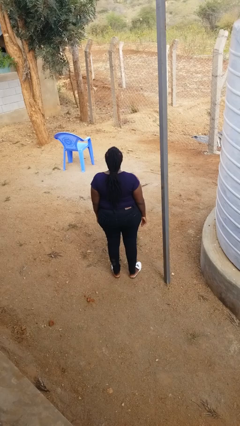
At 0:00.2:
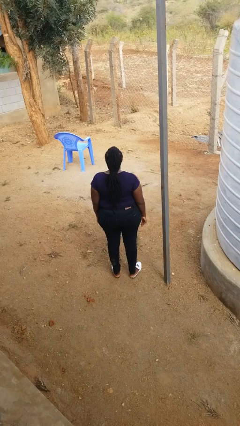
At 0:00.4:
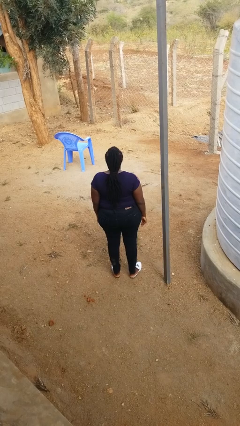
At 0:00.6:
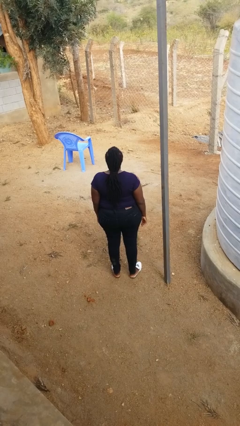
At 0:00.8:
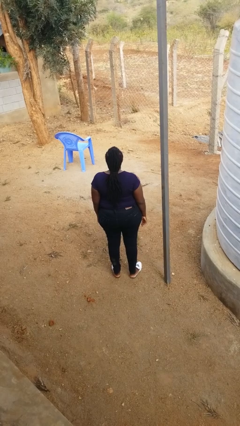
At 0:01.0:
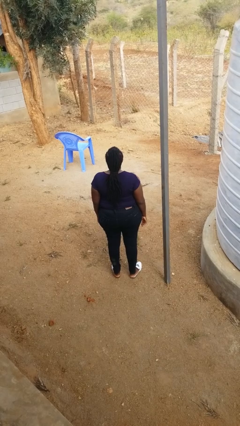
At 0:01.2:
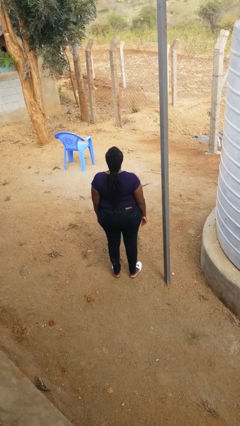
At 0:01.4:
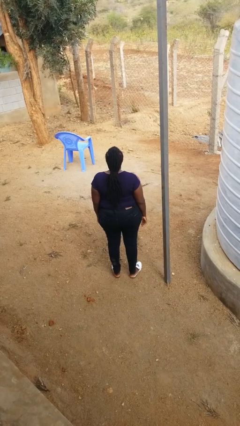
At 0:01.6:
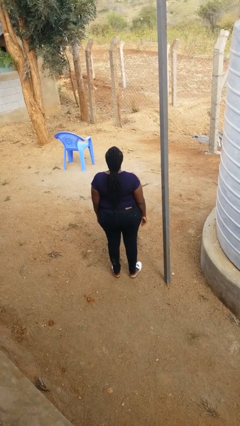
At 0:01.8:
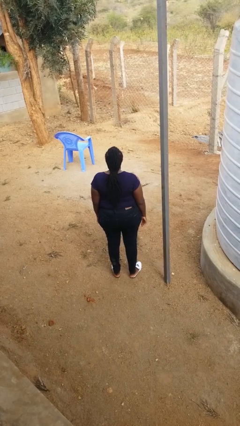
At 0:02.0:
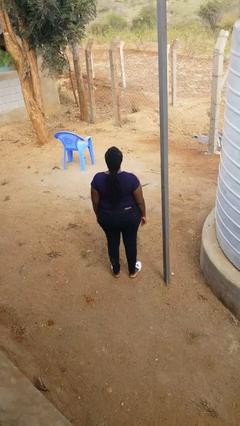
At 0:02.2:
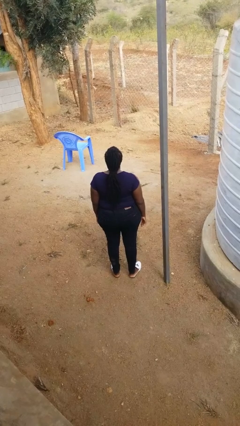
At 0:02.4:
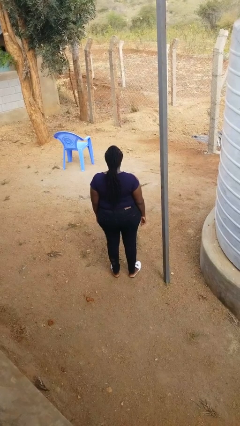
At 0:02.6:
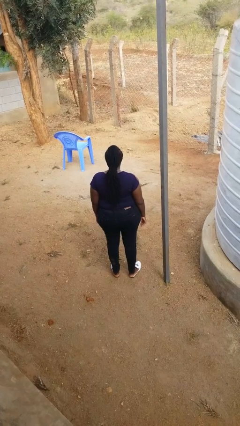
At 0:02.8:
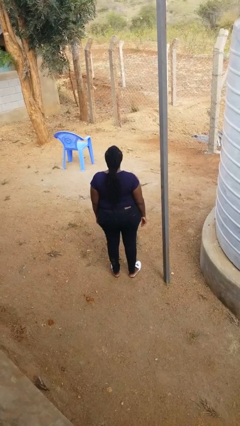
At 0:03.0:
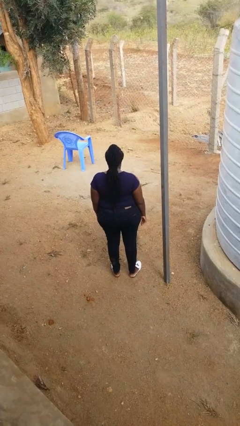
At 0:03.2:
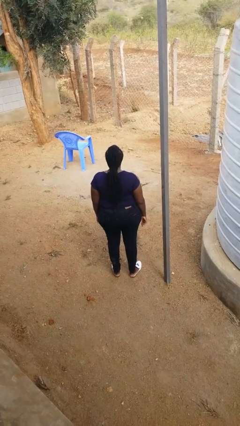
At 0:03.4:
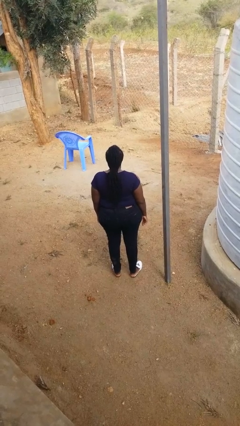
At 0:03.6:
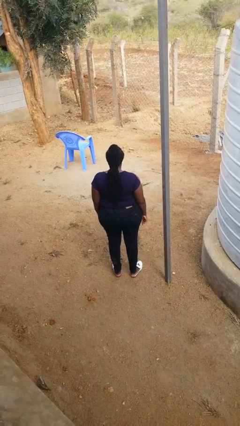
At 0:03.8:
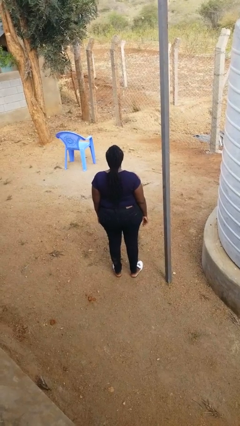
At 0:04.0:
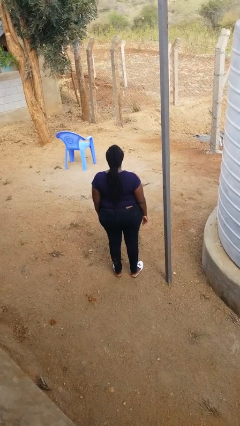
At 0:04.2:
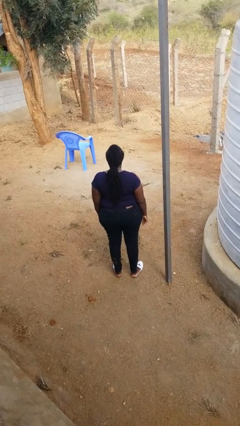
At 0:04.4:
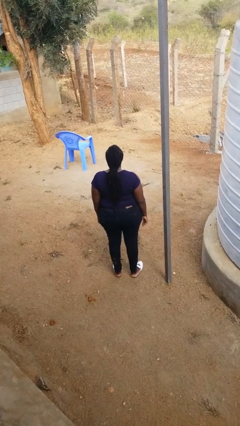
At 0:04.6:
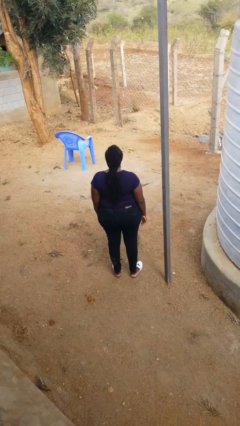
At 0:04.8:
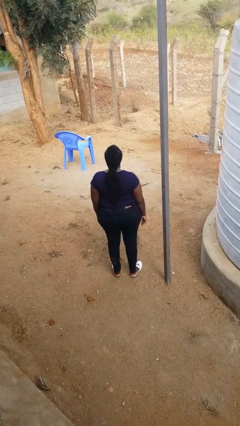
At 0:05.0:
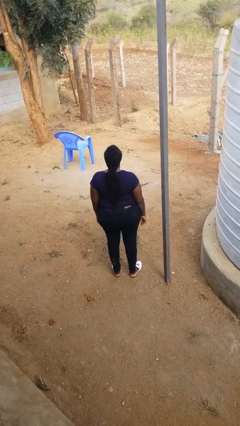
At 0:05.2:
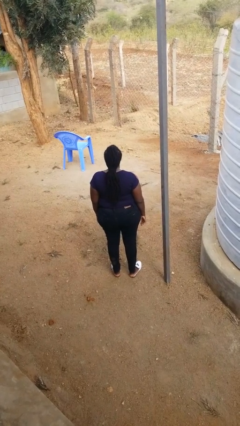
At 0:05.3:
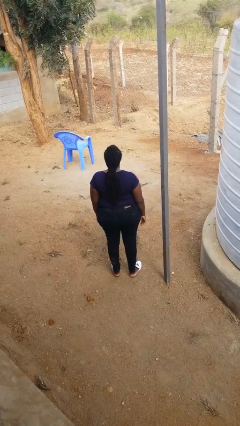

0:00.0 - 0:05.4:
person nods head

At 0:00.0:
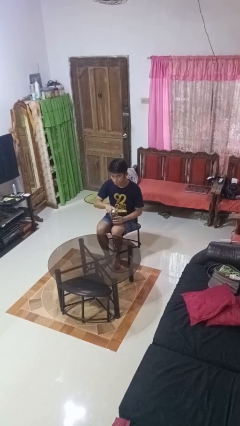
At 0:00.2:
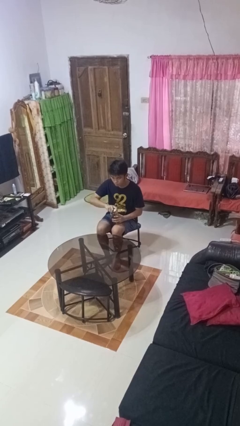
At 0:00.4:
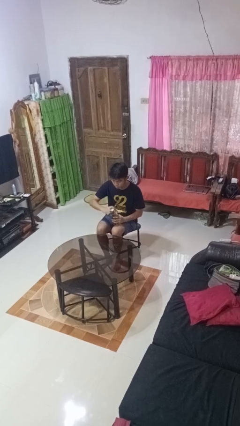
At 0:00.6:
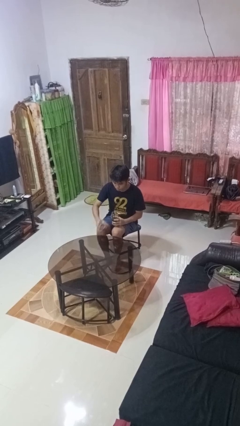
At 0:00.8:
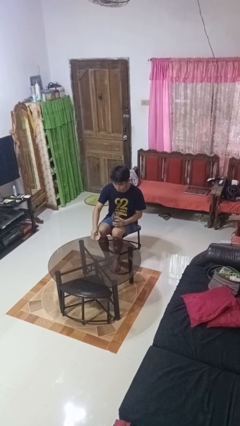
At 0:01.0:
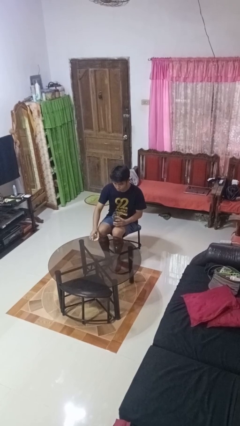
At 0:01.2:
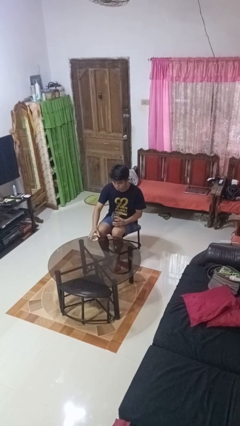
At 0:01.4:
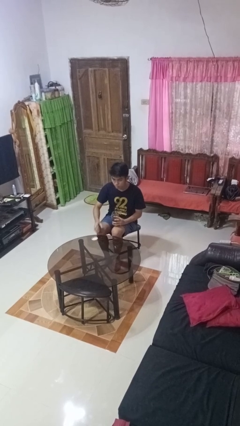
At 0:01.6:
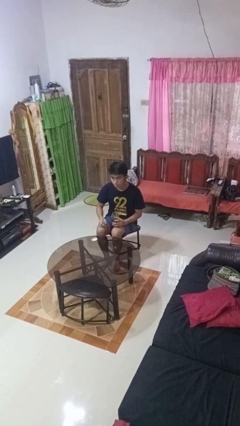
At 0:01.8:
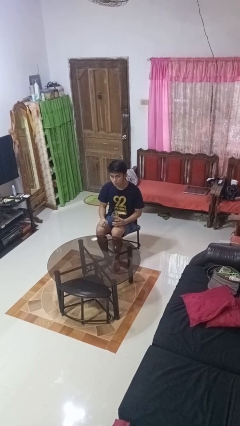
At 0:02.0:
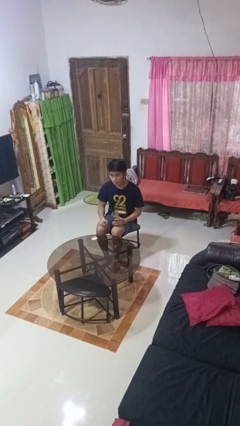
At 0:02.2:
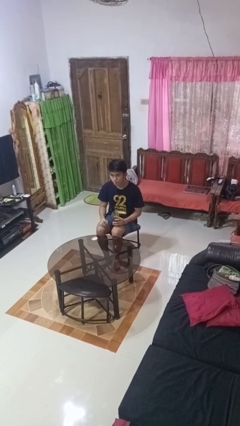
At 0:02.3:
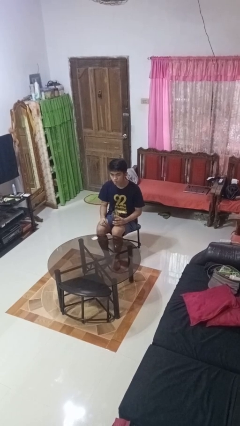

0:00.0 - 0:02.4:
person opens jar

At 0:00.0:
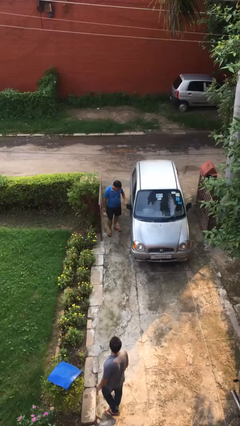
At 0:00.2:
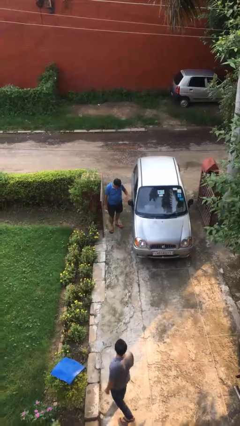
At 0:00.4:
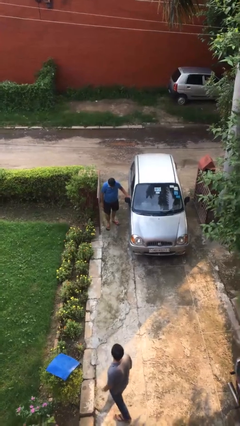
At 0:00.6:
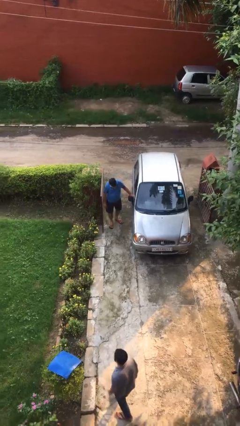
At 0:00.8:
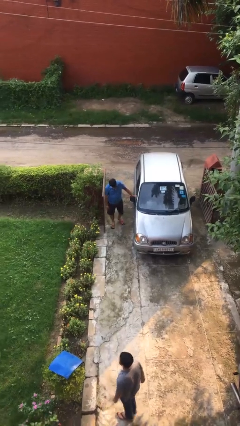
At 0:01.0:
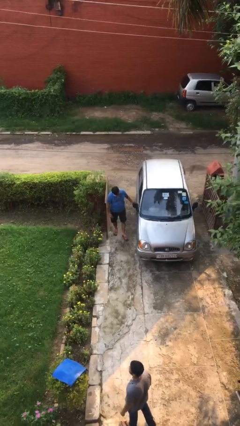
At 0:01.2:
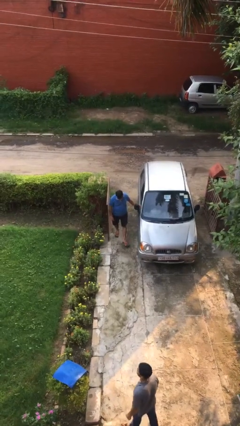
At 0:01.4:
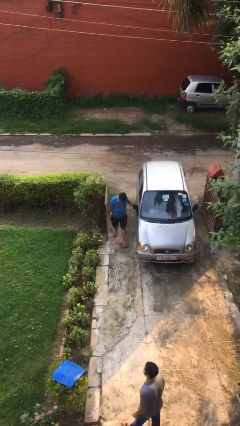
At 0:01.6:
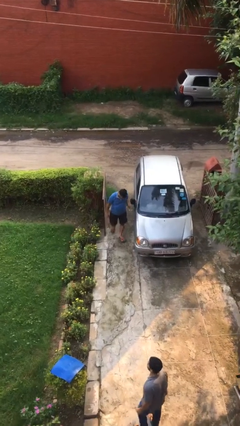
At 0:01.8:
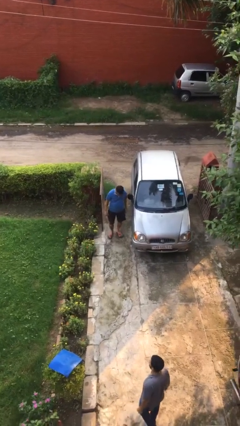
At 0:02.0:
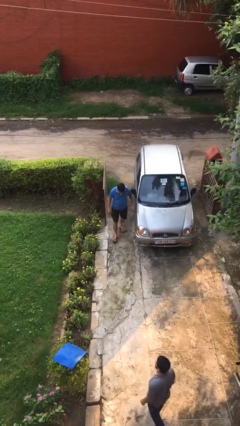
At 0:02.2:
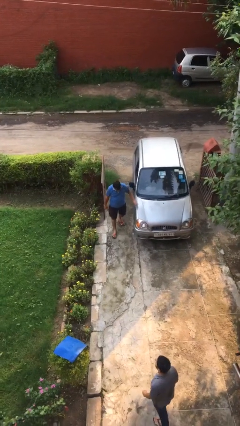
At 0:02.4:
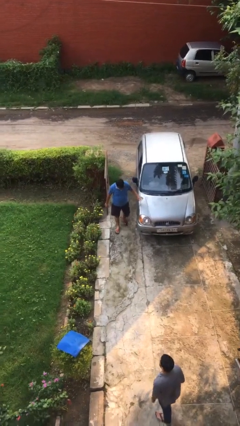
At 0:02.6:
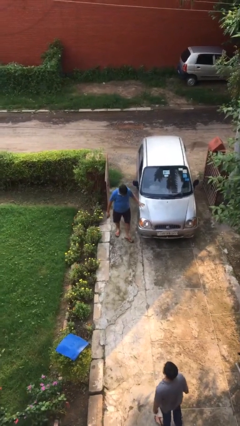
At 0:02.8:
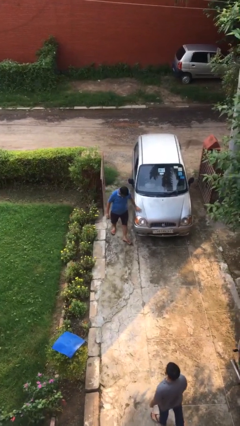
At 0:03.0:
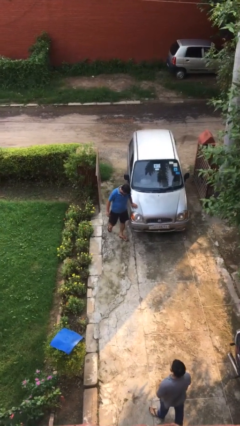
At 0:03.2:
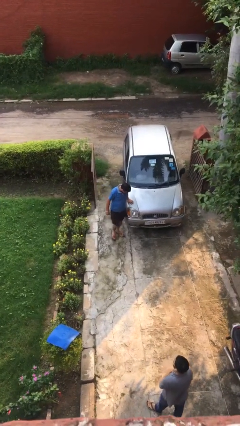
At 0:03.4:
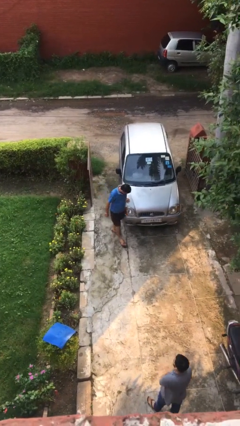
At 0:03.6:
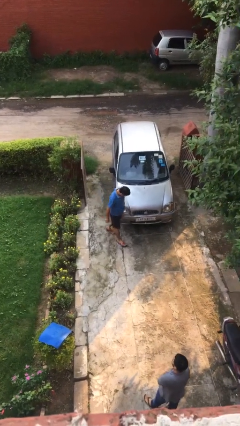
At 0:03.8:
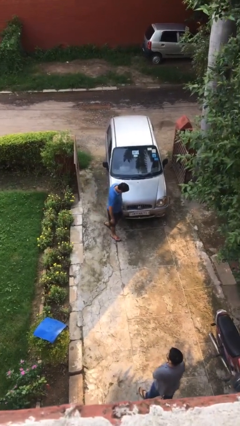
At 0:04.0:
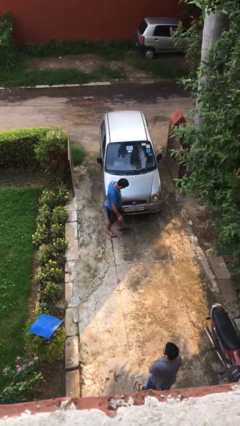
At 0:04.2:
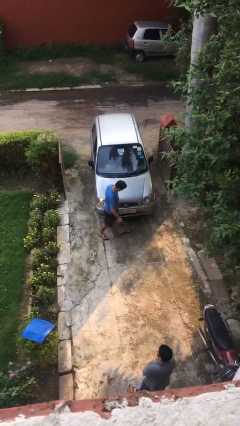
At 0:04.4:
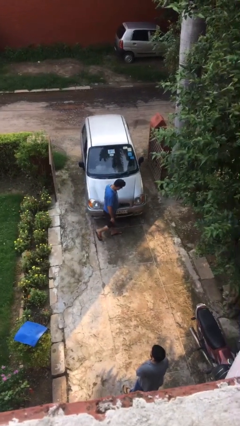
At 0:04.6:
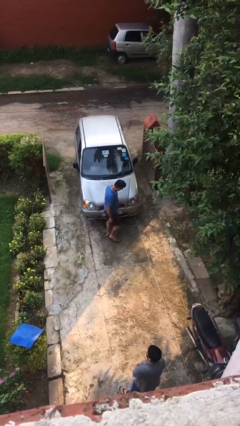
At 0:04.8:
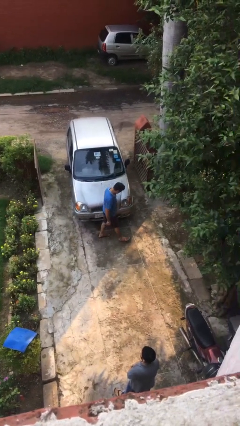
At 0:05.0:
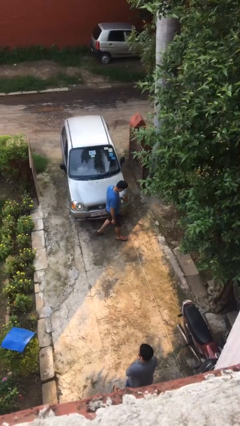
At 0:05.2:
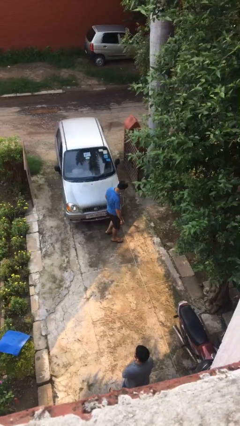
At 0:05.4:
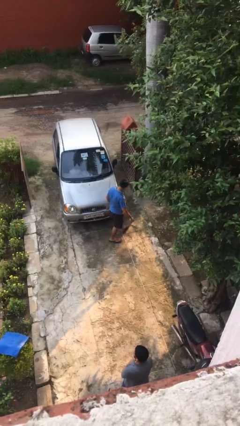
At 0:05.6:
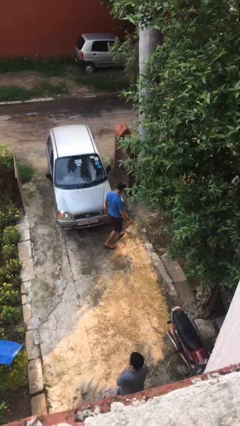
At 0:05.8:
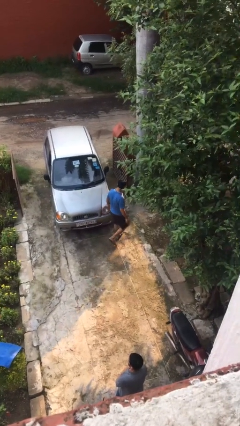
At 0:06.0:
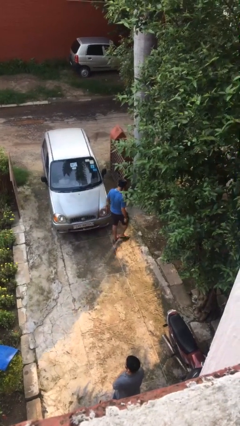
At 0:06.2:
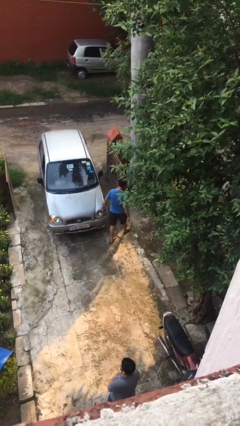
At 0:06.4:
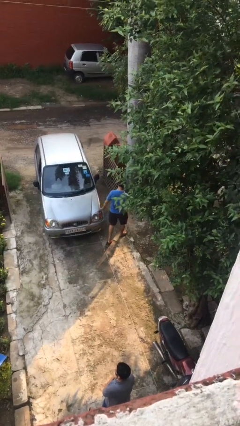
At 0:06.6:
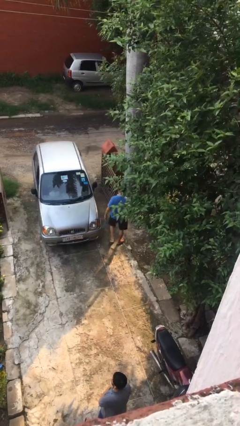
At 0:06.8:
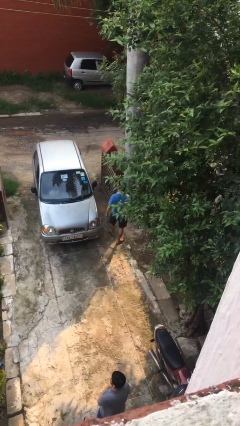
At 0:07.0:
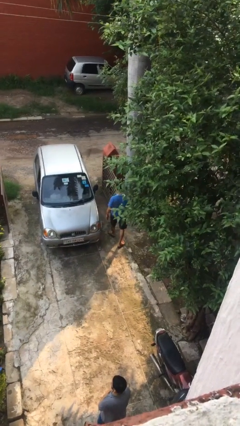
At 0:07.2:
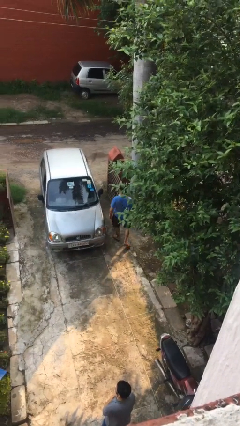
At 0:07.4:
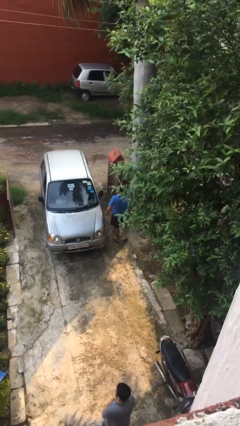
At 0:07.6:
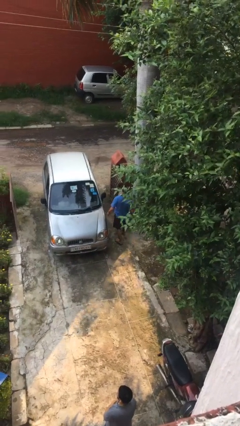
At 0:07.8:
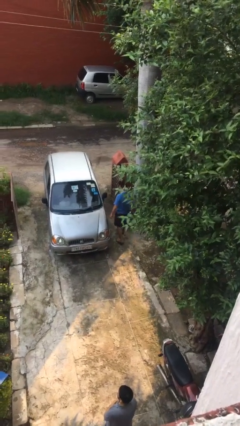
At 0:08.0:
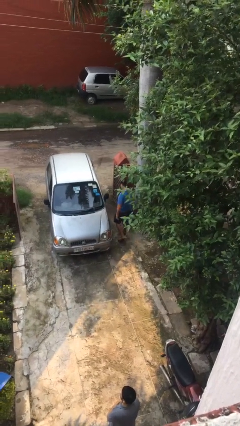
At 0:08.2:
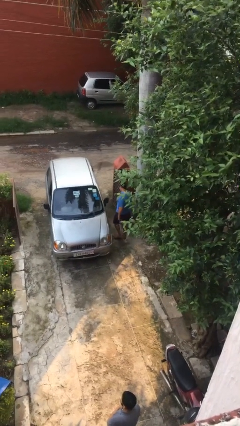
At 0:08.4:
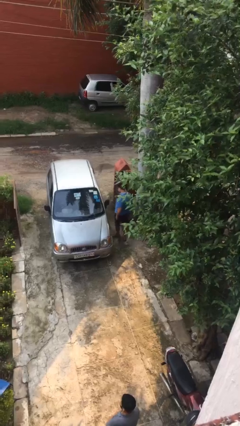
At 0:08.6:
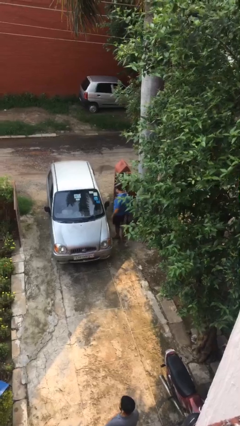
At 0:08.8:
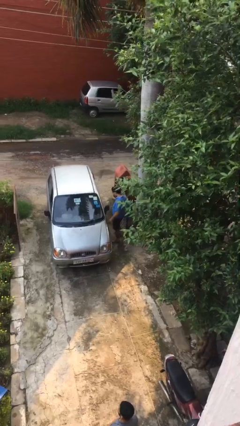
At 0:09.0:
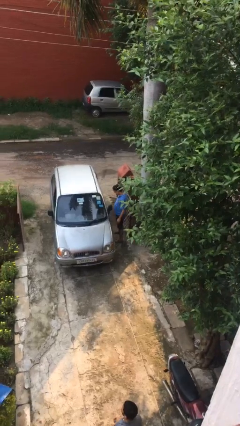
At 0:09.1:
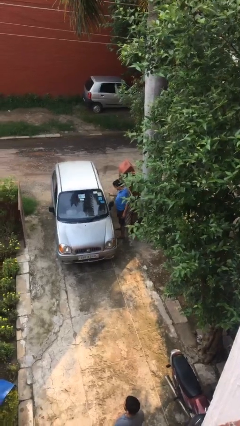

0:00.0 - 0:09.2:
person walks around car

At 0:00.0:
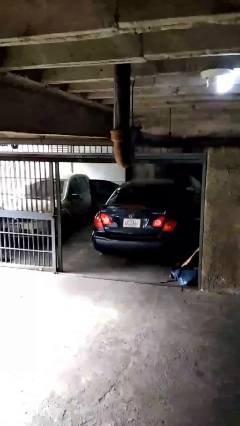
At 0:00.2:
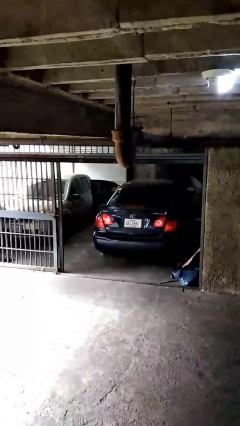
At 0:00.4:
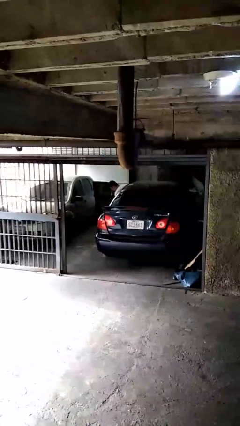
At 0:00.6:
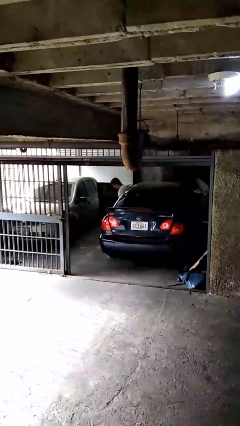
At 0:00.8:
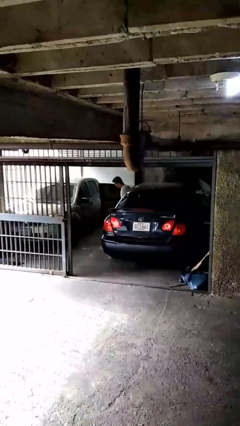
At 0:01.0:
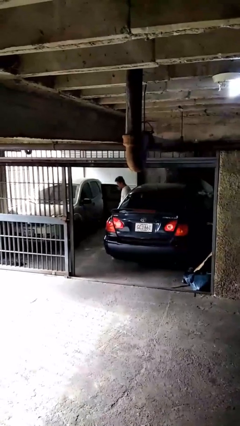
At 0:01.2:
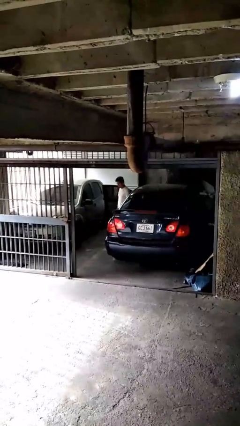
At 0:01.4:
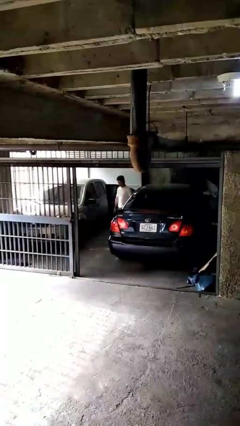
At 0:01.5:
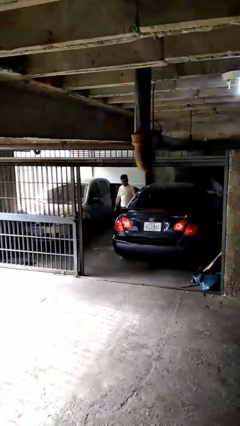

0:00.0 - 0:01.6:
person exits car
